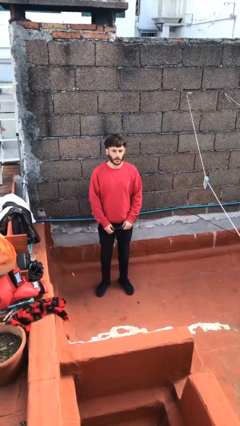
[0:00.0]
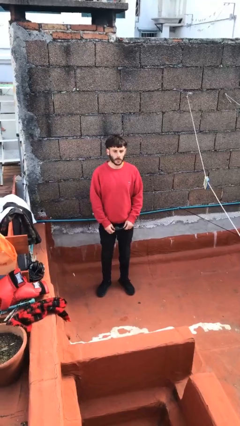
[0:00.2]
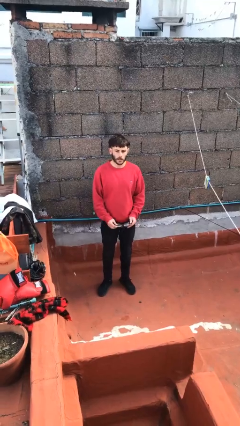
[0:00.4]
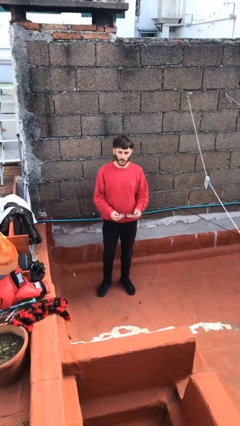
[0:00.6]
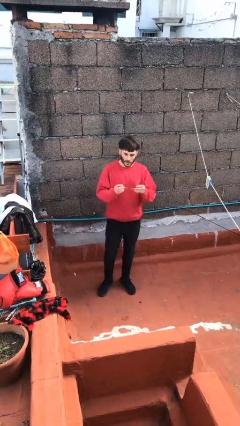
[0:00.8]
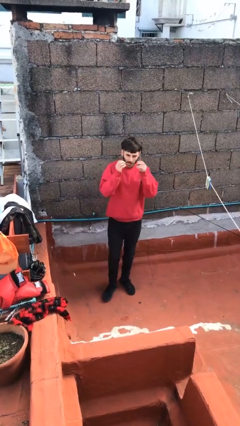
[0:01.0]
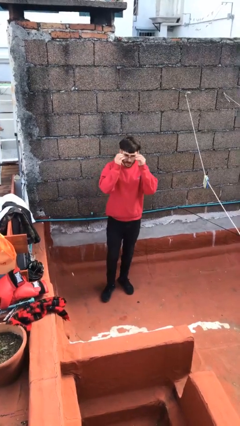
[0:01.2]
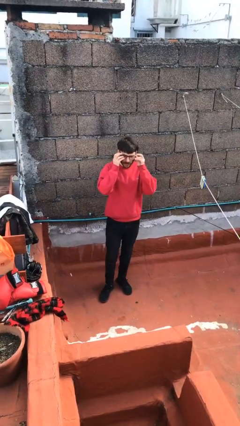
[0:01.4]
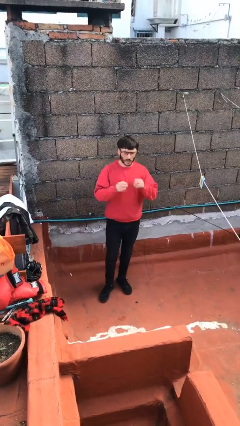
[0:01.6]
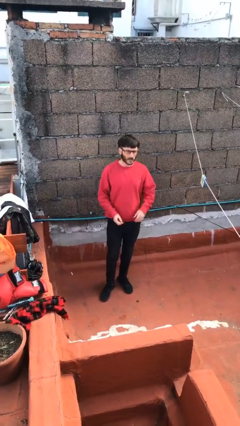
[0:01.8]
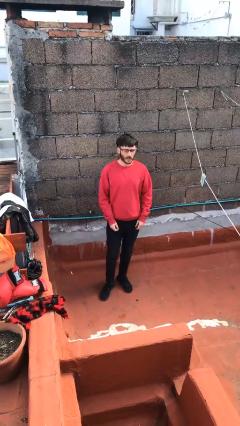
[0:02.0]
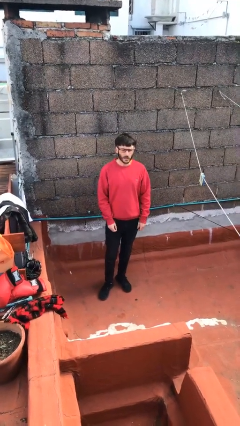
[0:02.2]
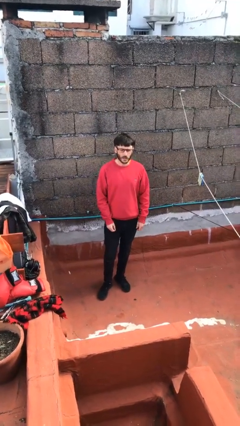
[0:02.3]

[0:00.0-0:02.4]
person puts on glasses

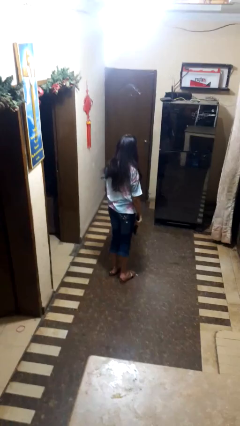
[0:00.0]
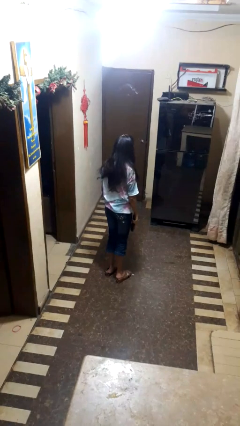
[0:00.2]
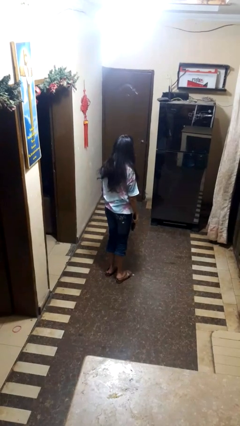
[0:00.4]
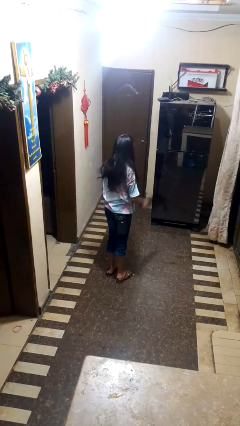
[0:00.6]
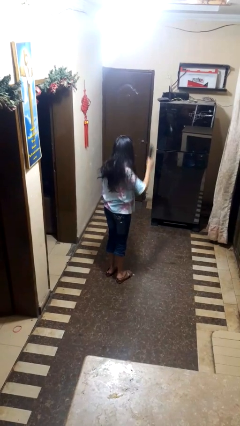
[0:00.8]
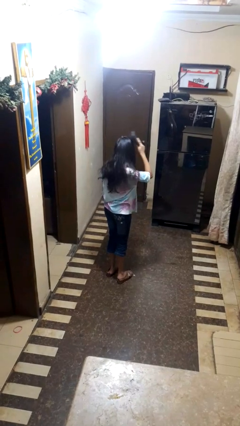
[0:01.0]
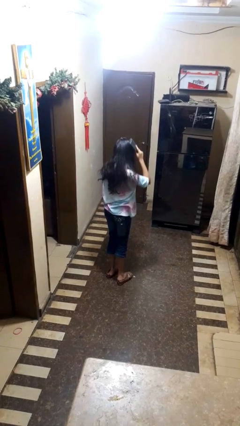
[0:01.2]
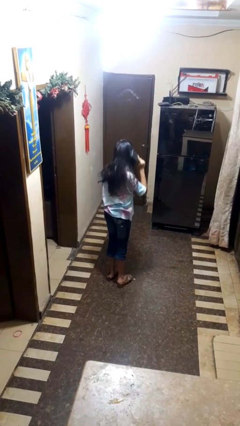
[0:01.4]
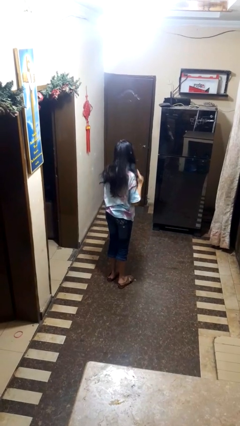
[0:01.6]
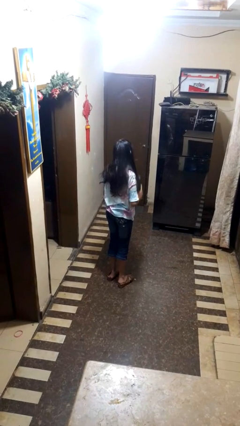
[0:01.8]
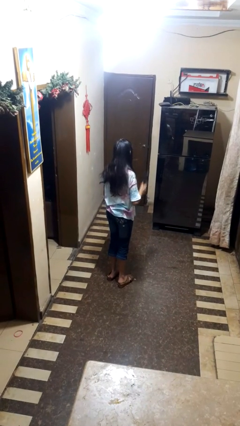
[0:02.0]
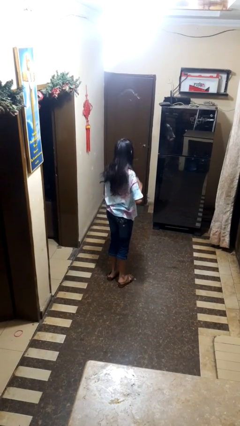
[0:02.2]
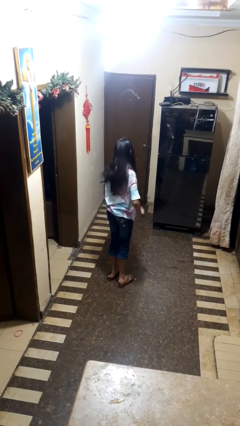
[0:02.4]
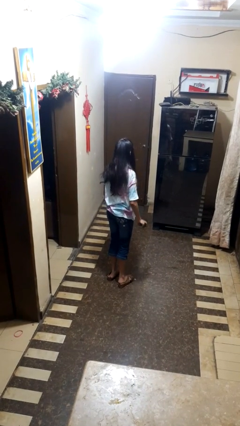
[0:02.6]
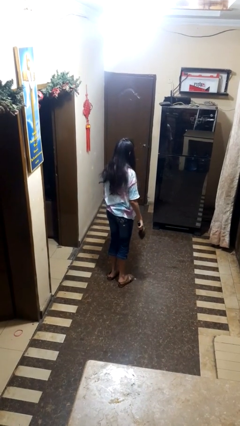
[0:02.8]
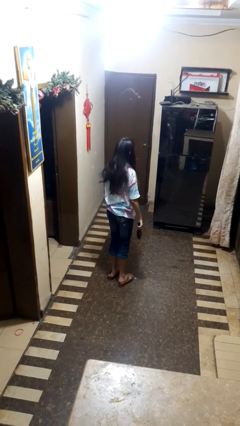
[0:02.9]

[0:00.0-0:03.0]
person brushes hair

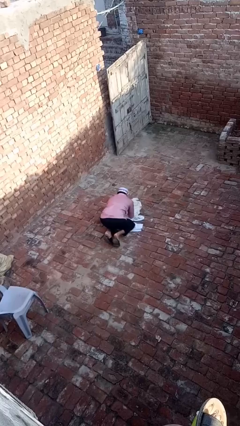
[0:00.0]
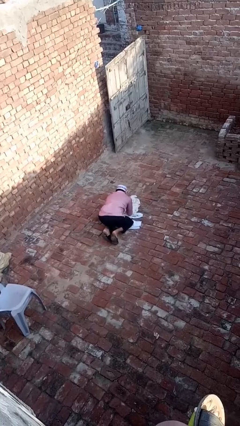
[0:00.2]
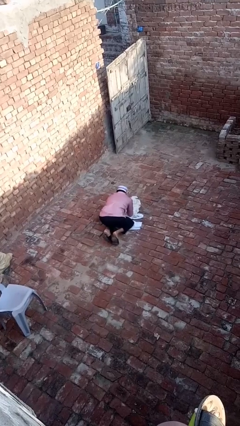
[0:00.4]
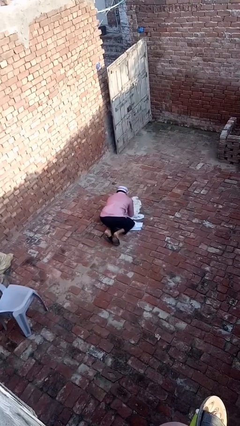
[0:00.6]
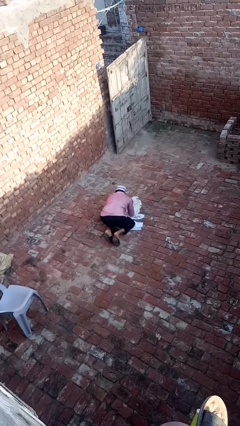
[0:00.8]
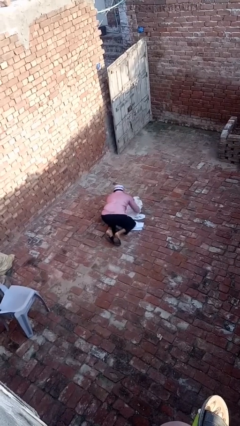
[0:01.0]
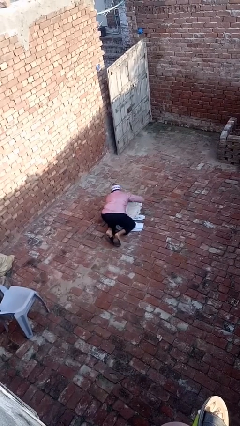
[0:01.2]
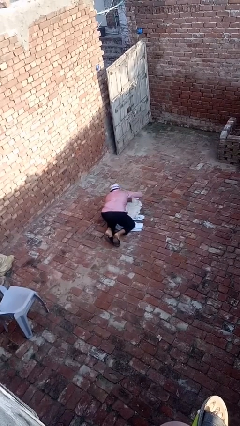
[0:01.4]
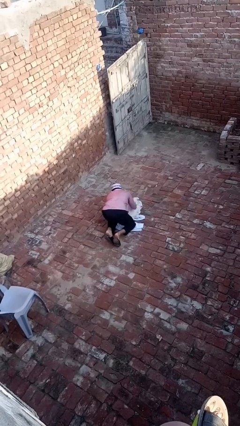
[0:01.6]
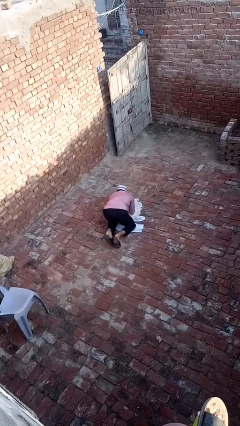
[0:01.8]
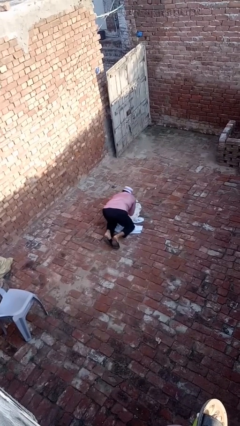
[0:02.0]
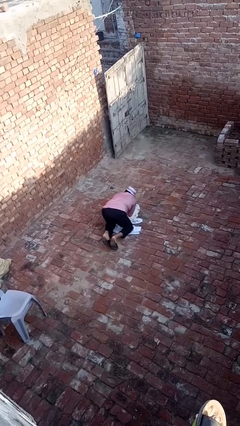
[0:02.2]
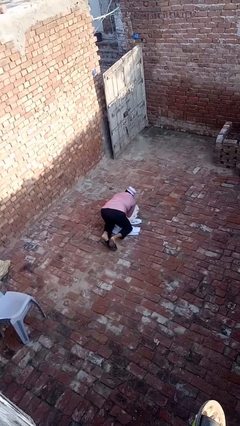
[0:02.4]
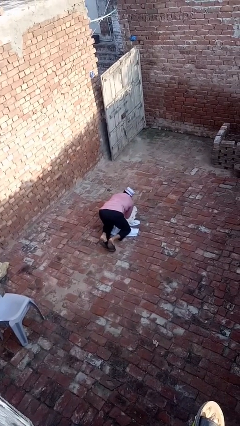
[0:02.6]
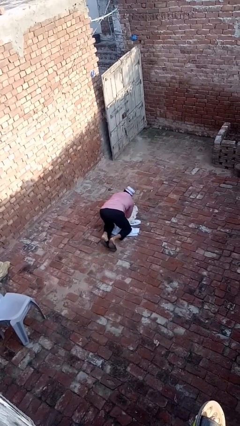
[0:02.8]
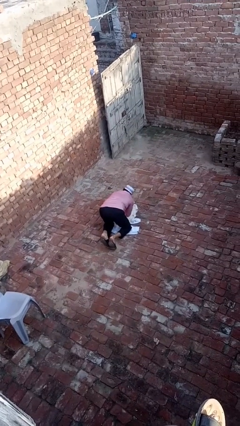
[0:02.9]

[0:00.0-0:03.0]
person crawls

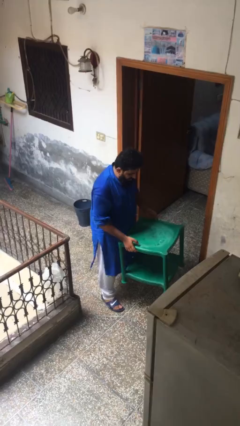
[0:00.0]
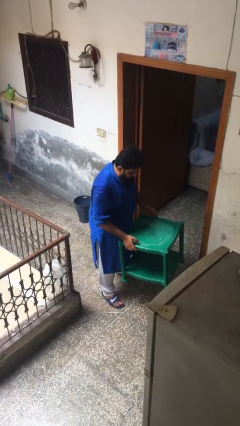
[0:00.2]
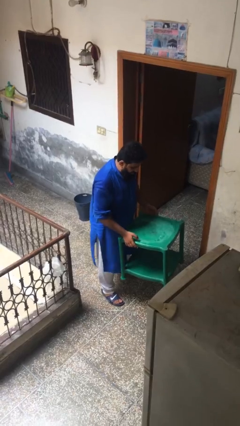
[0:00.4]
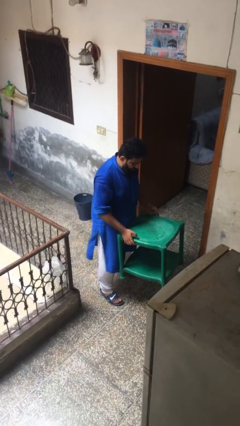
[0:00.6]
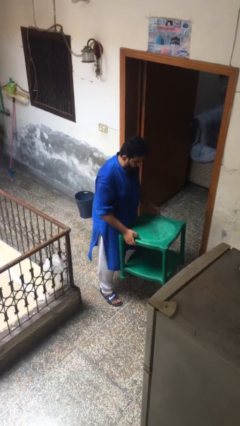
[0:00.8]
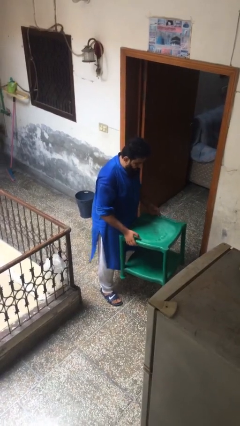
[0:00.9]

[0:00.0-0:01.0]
person puts down object on floor

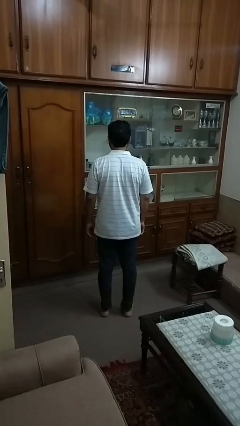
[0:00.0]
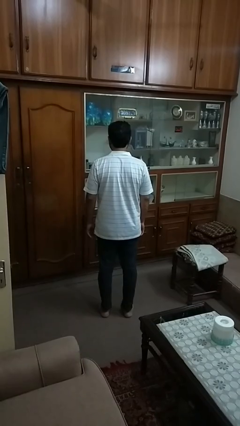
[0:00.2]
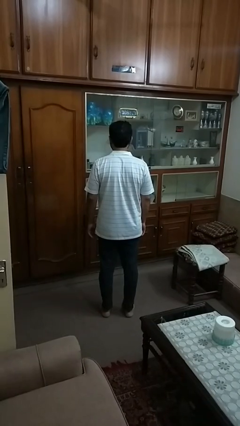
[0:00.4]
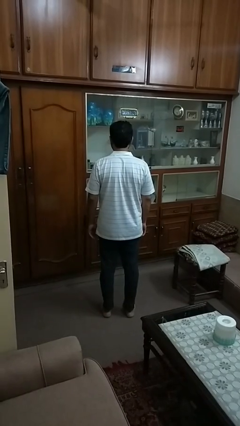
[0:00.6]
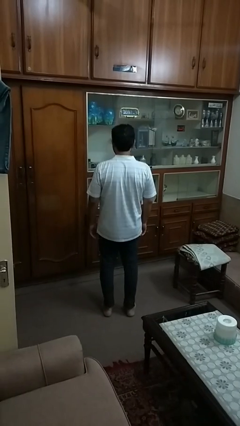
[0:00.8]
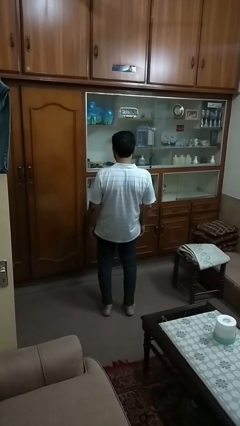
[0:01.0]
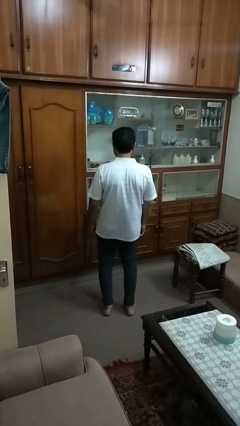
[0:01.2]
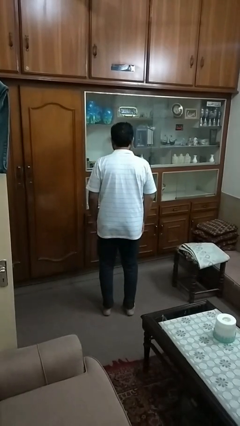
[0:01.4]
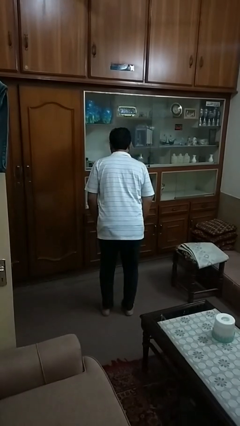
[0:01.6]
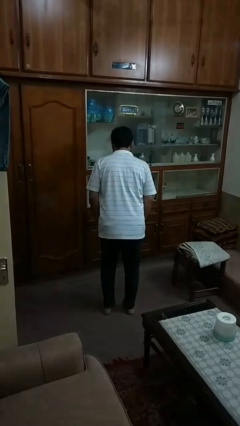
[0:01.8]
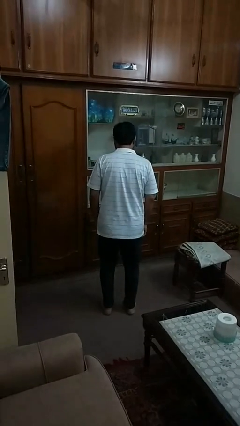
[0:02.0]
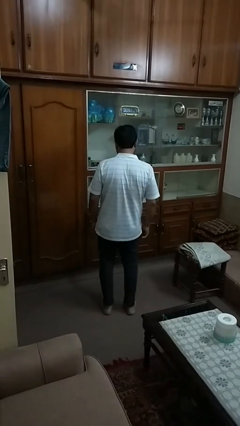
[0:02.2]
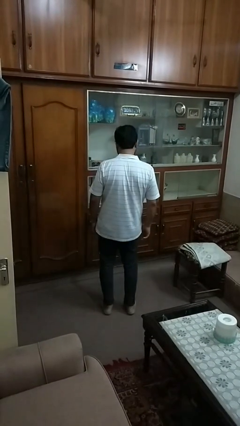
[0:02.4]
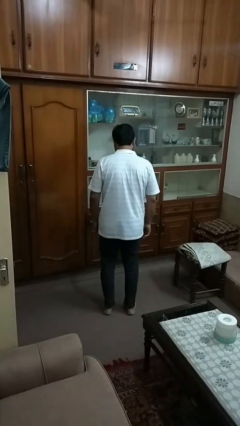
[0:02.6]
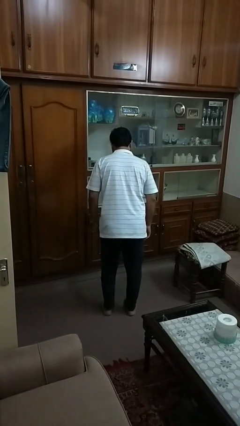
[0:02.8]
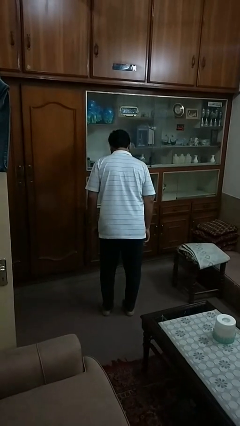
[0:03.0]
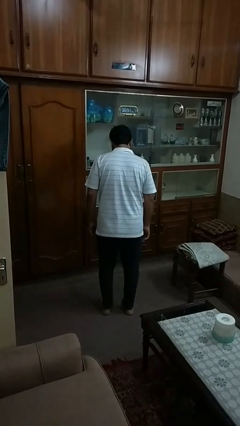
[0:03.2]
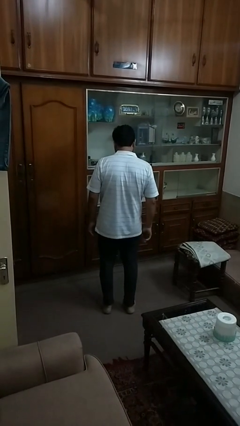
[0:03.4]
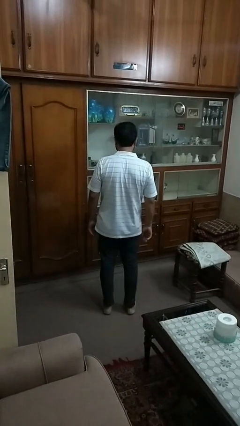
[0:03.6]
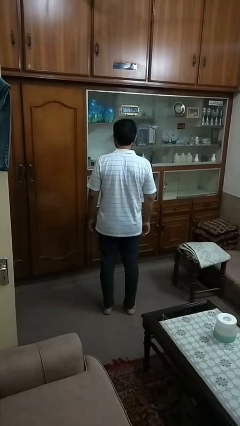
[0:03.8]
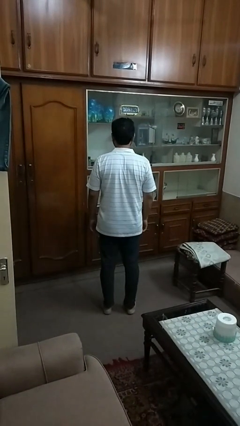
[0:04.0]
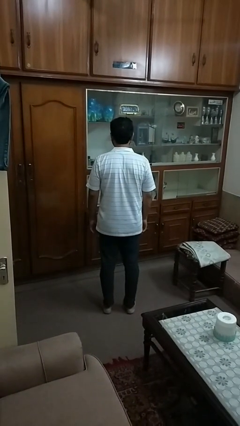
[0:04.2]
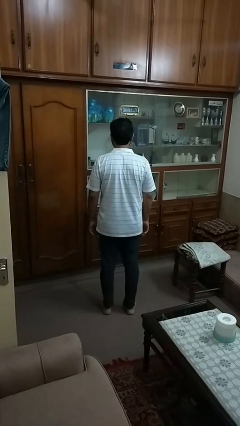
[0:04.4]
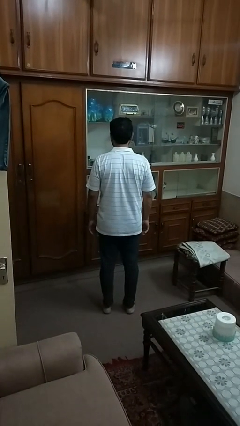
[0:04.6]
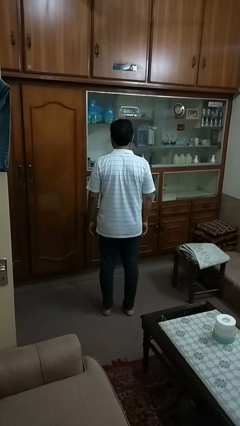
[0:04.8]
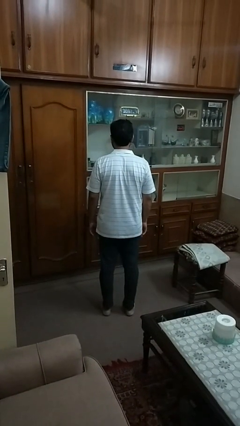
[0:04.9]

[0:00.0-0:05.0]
person wiggles hips

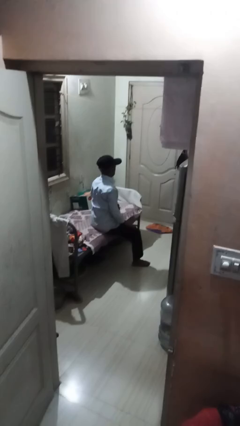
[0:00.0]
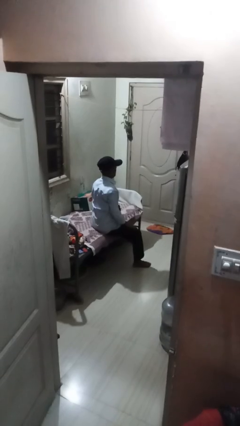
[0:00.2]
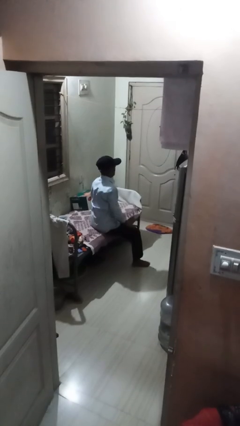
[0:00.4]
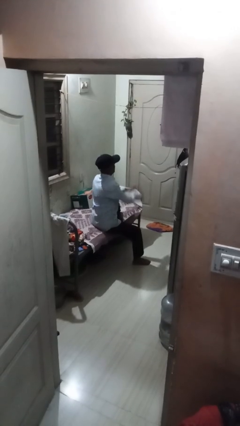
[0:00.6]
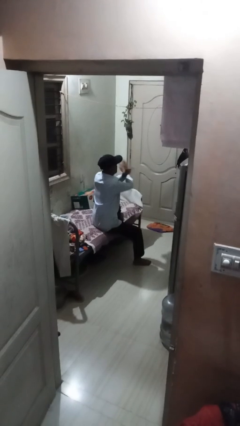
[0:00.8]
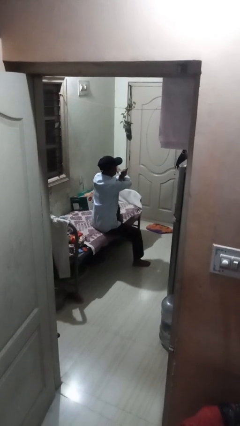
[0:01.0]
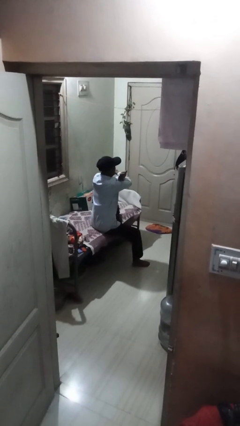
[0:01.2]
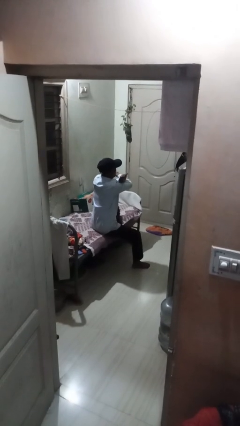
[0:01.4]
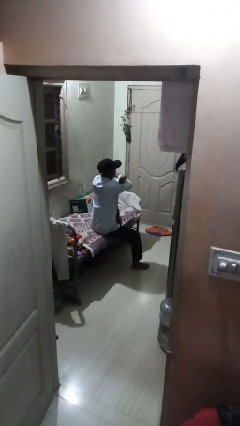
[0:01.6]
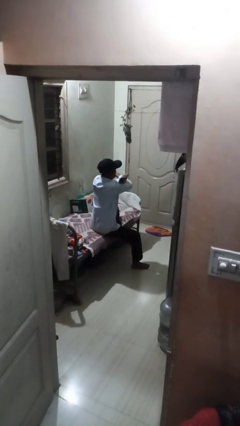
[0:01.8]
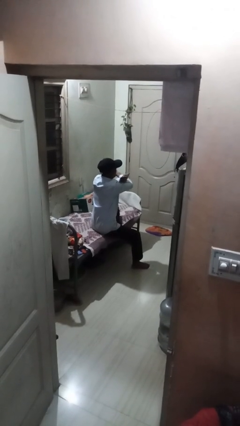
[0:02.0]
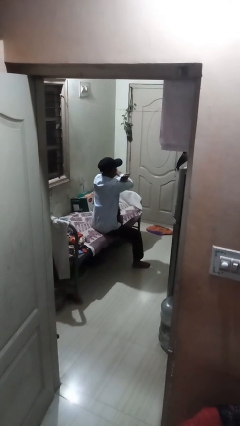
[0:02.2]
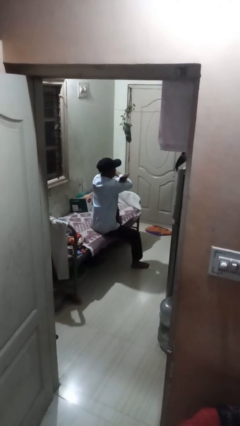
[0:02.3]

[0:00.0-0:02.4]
person gestures arms x

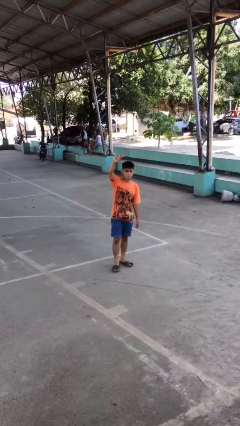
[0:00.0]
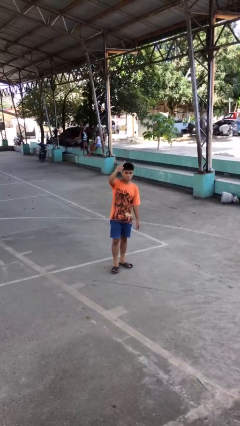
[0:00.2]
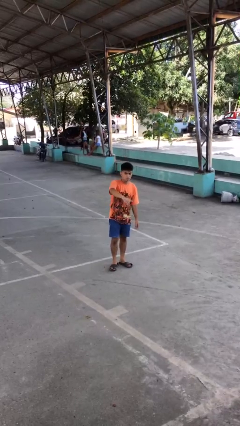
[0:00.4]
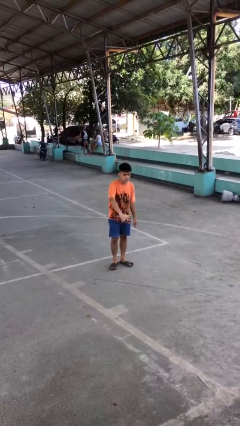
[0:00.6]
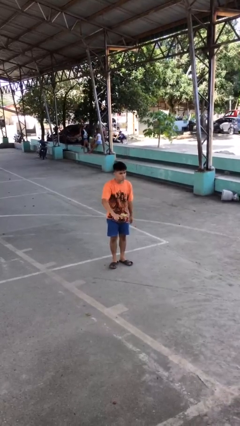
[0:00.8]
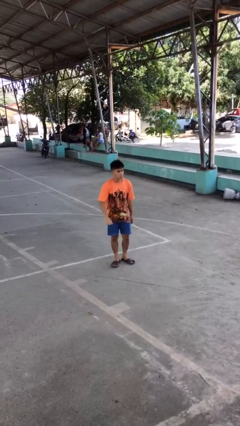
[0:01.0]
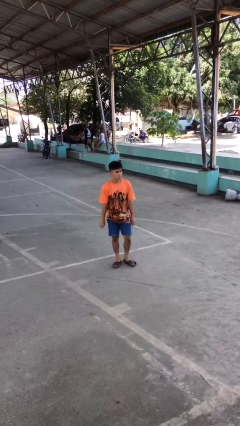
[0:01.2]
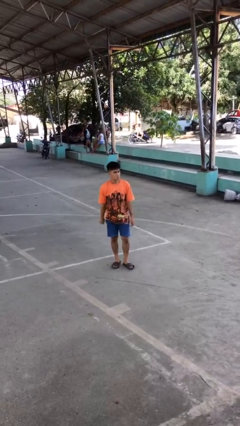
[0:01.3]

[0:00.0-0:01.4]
person gestures swipe down
